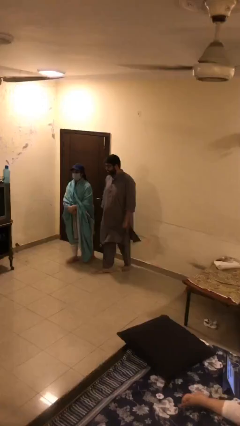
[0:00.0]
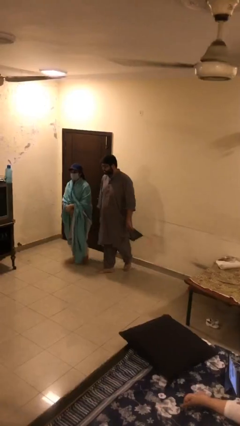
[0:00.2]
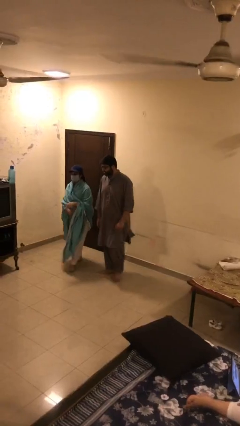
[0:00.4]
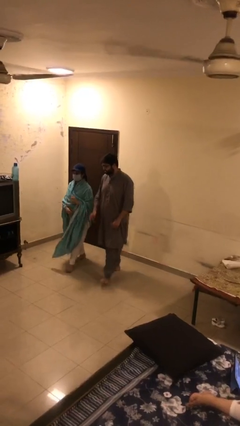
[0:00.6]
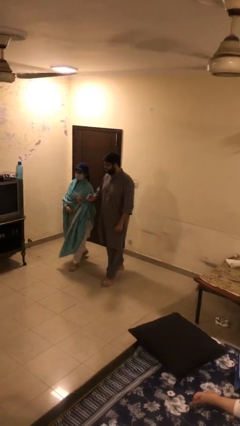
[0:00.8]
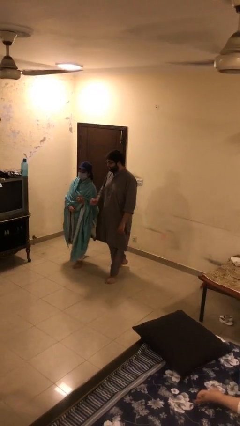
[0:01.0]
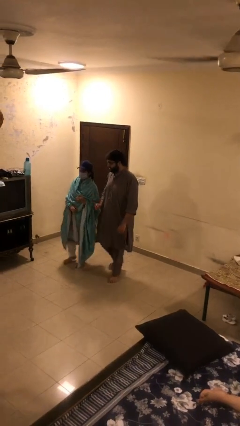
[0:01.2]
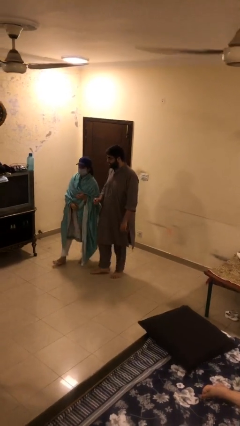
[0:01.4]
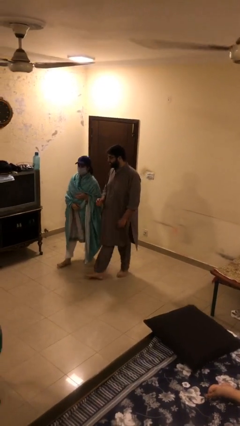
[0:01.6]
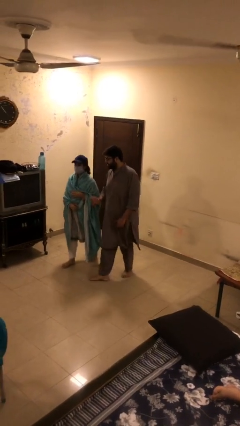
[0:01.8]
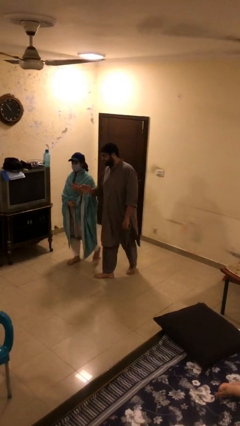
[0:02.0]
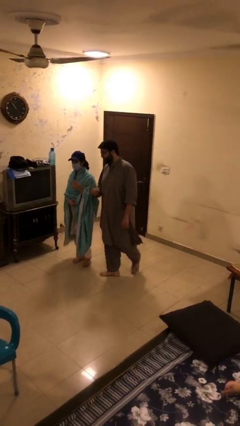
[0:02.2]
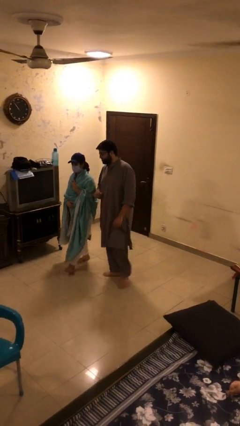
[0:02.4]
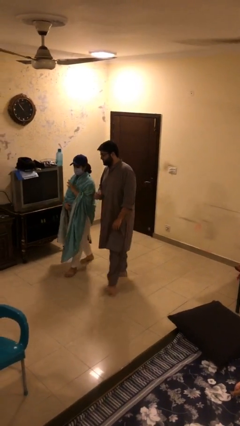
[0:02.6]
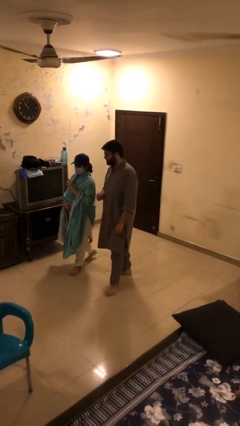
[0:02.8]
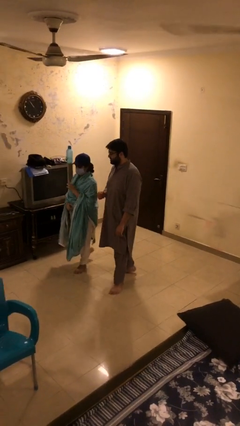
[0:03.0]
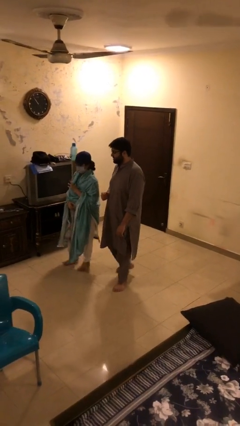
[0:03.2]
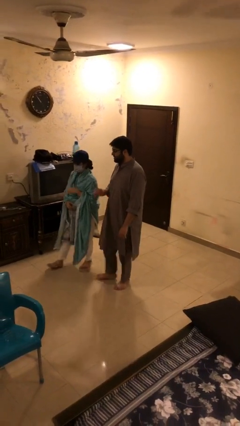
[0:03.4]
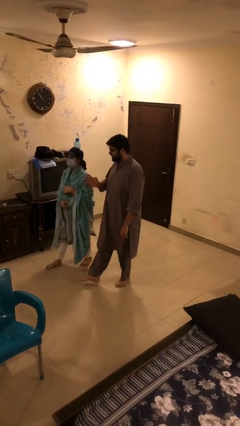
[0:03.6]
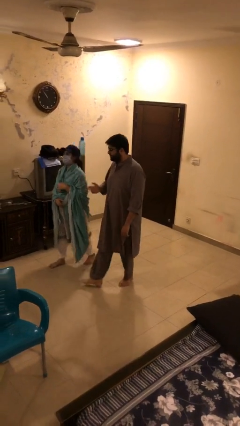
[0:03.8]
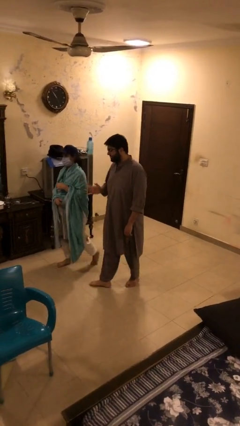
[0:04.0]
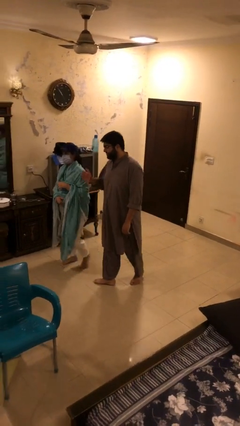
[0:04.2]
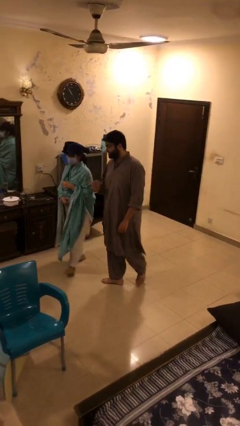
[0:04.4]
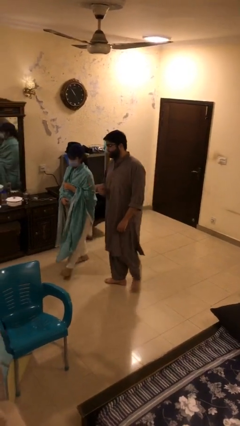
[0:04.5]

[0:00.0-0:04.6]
person talks to person

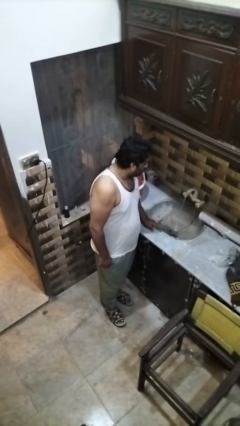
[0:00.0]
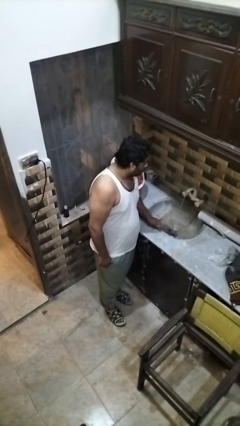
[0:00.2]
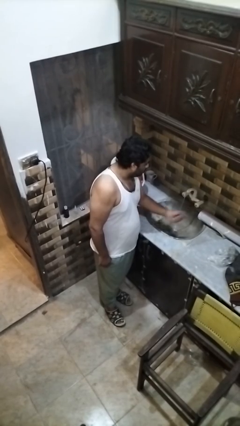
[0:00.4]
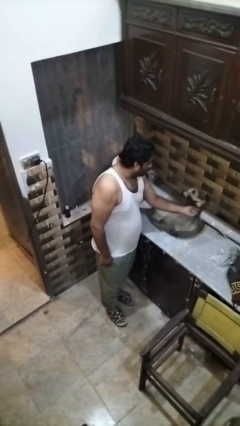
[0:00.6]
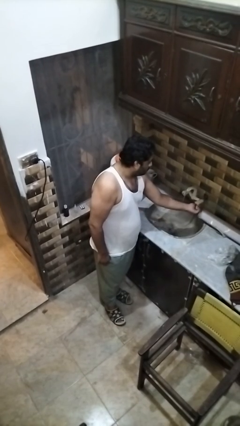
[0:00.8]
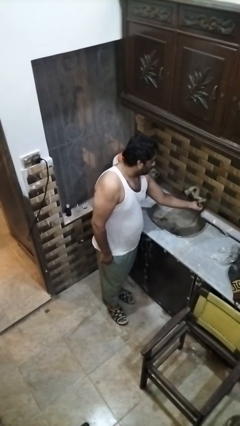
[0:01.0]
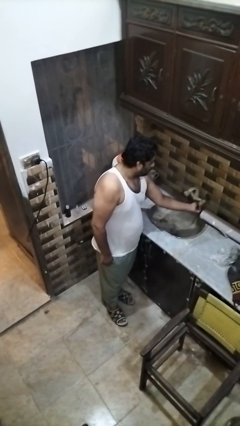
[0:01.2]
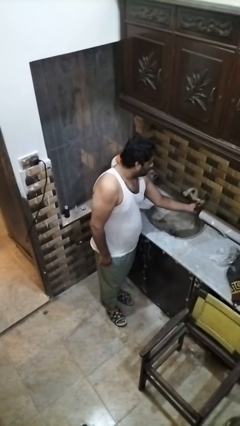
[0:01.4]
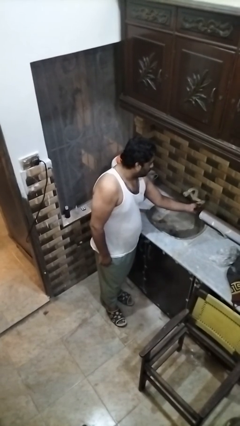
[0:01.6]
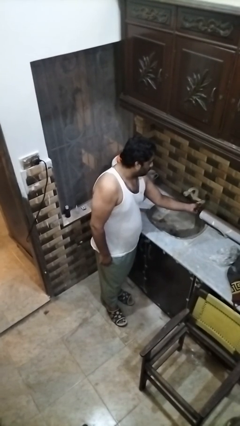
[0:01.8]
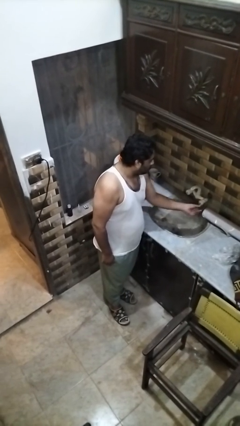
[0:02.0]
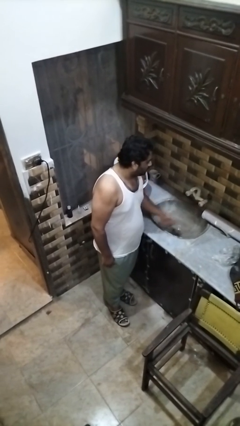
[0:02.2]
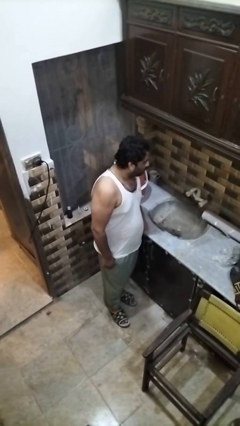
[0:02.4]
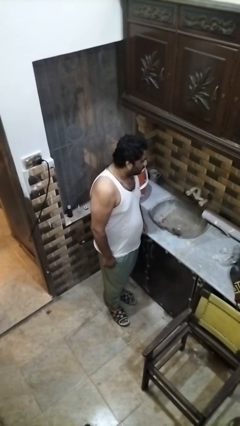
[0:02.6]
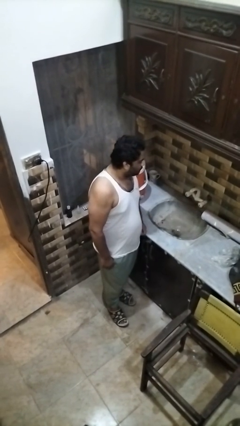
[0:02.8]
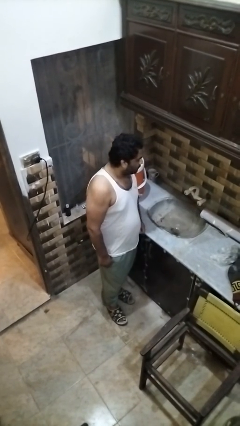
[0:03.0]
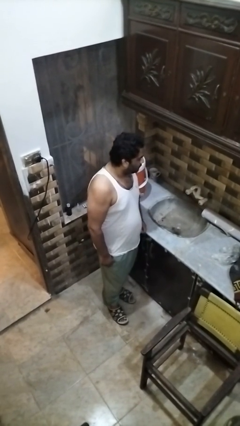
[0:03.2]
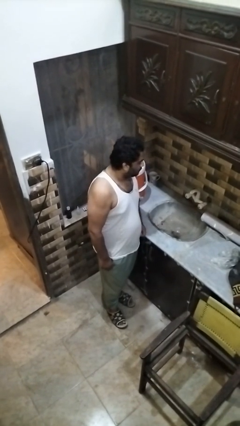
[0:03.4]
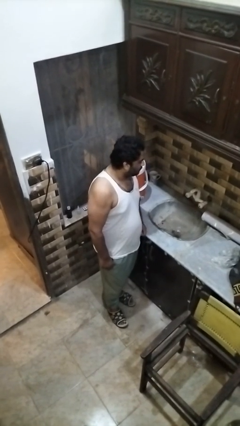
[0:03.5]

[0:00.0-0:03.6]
person turns off faucet

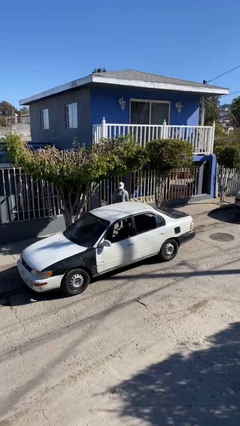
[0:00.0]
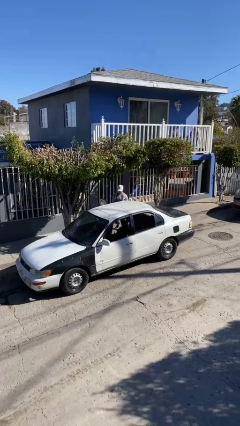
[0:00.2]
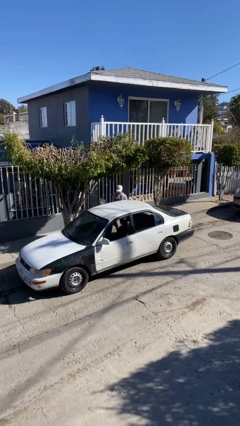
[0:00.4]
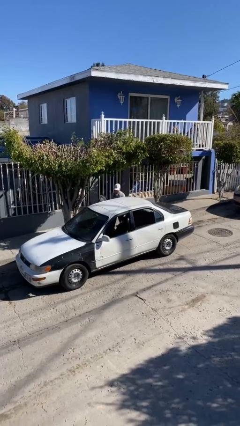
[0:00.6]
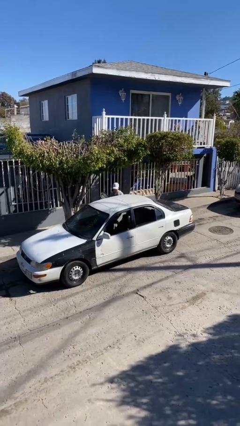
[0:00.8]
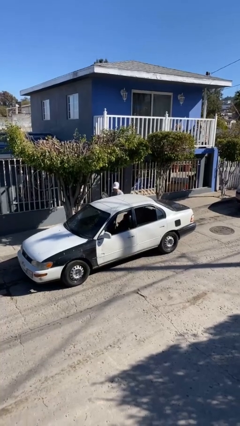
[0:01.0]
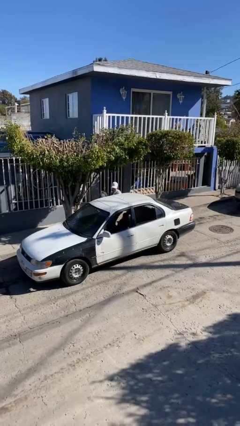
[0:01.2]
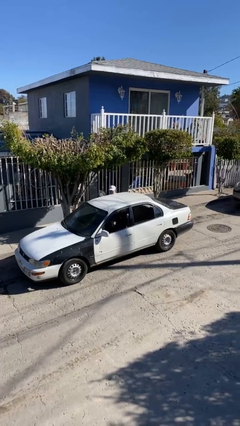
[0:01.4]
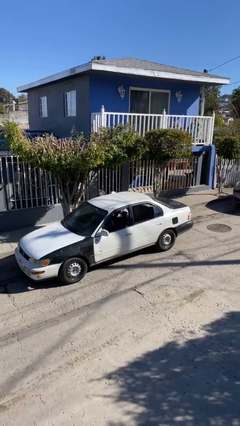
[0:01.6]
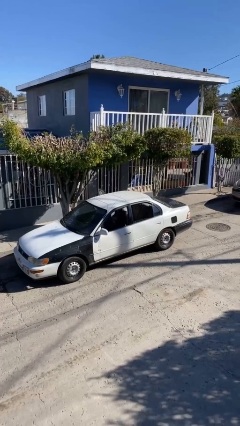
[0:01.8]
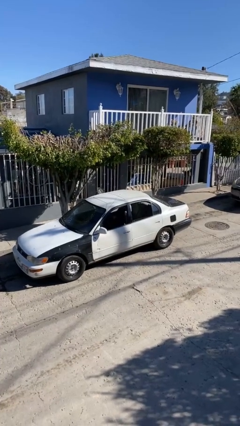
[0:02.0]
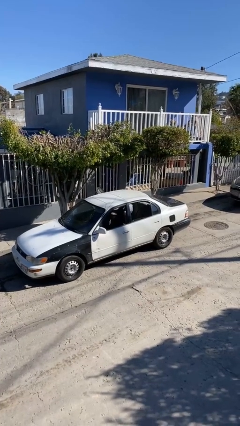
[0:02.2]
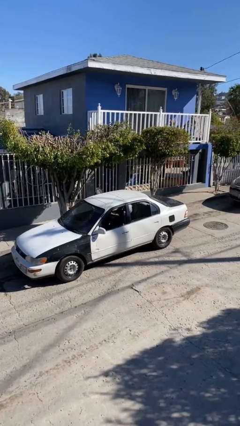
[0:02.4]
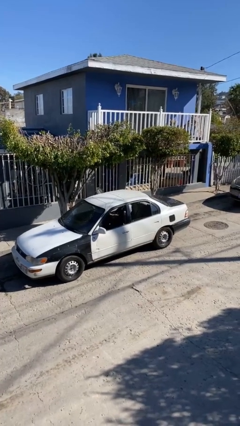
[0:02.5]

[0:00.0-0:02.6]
person enters car

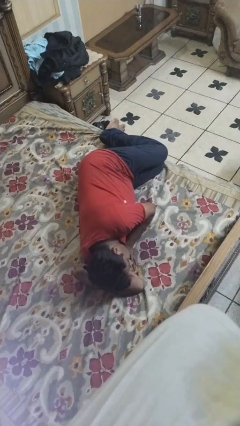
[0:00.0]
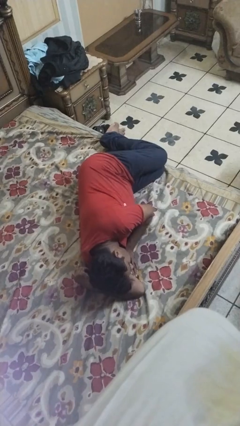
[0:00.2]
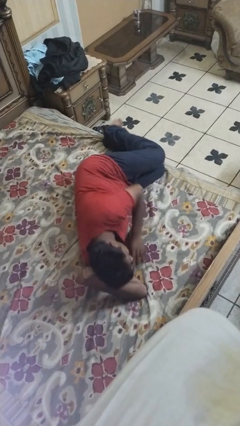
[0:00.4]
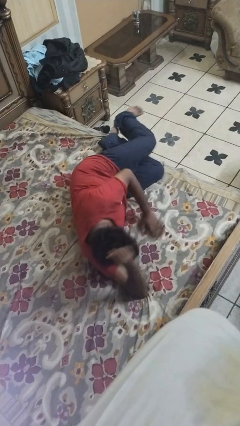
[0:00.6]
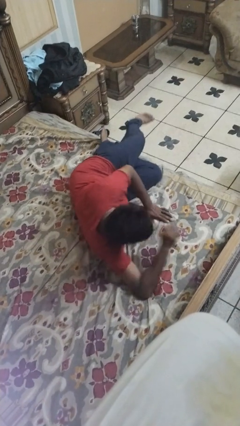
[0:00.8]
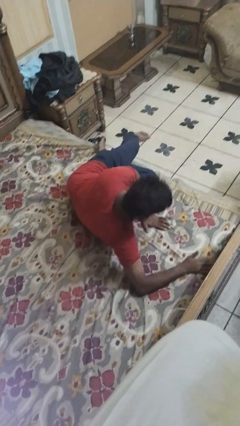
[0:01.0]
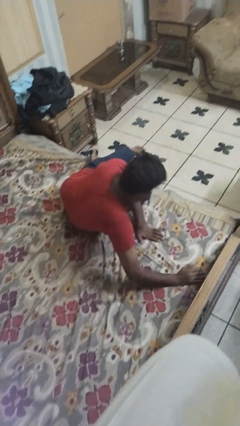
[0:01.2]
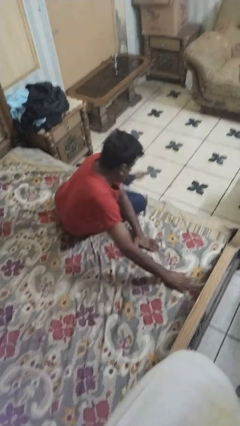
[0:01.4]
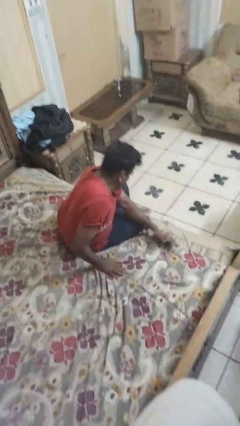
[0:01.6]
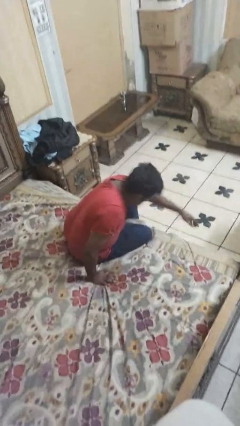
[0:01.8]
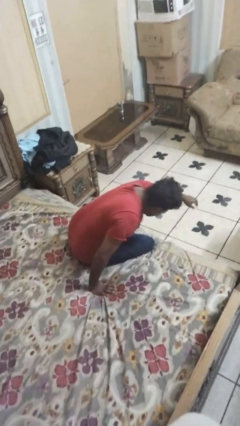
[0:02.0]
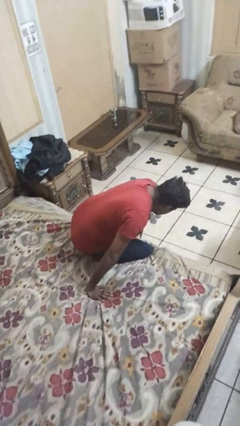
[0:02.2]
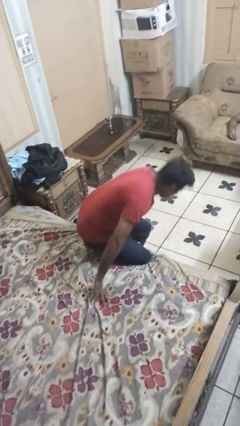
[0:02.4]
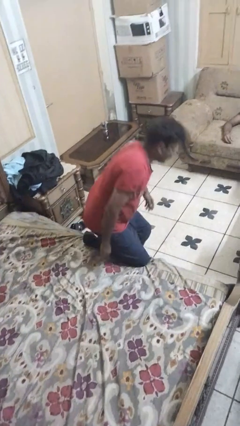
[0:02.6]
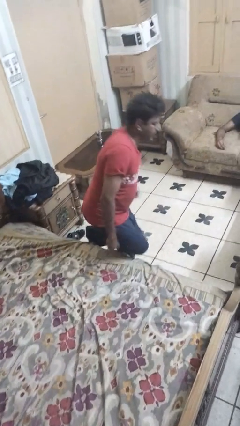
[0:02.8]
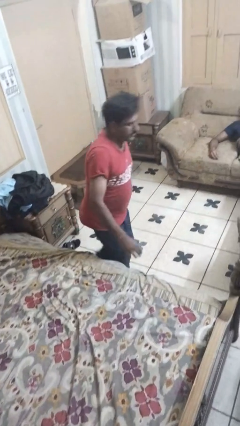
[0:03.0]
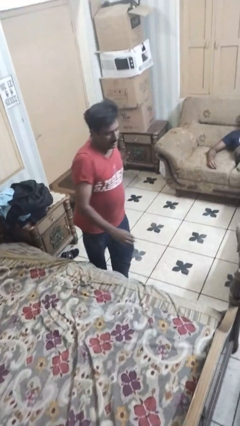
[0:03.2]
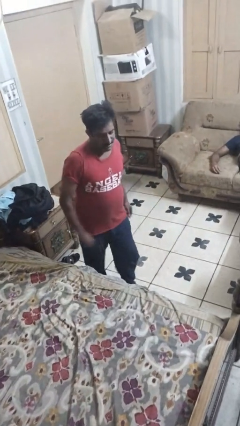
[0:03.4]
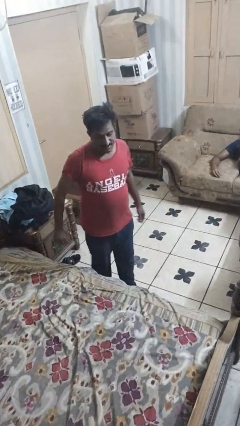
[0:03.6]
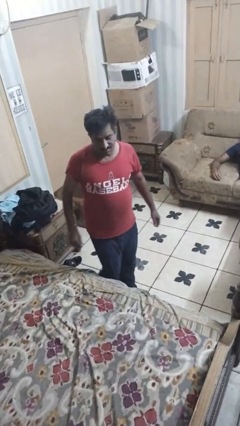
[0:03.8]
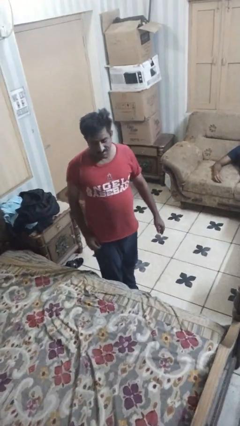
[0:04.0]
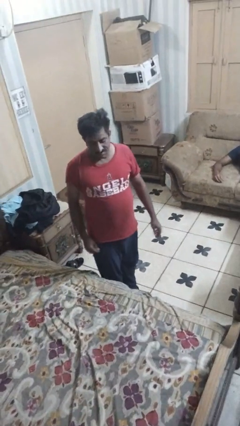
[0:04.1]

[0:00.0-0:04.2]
person stands up

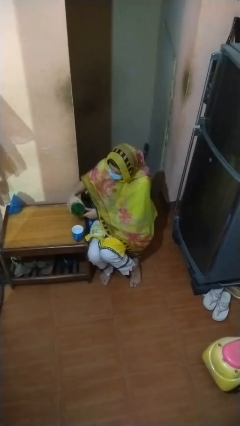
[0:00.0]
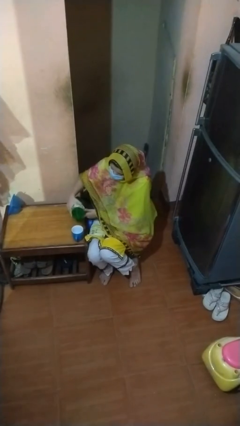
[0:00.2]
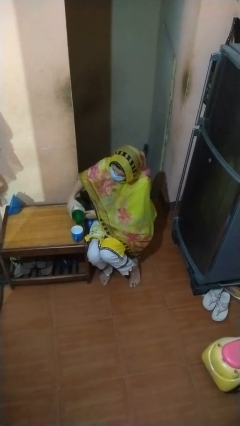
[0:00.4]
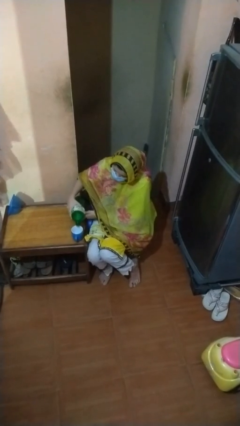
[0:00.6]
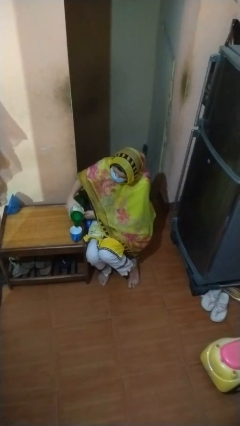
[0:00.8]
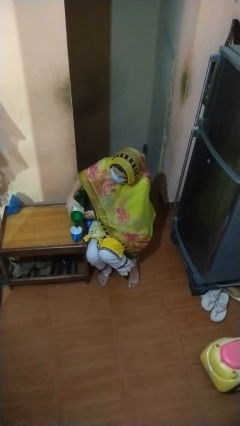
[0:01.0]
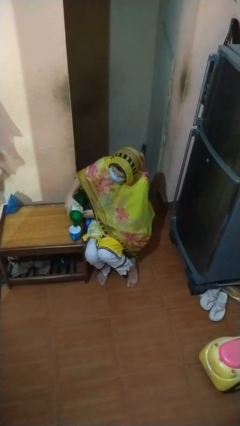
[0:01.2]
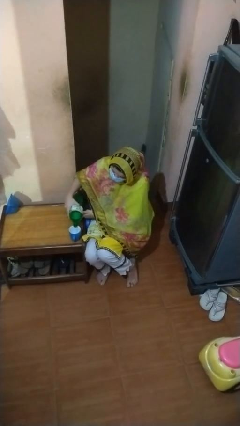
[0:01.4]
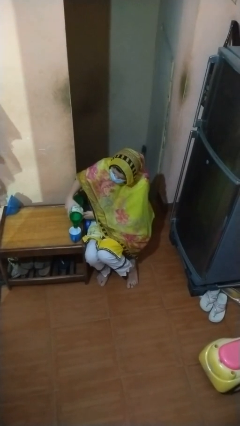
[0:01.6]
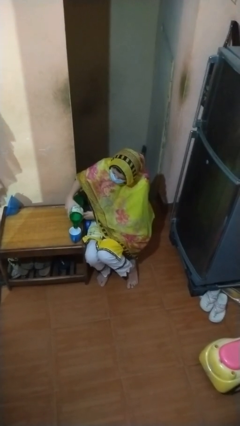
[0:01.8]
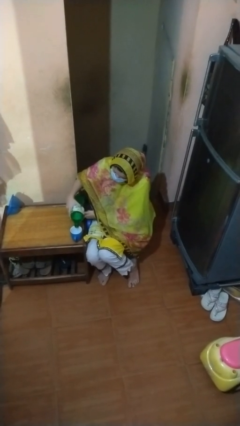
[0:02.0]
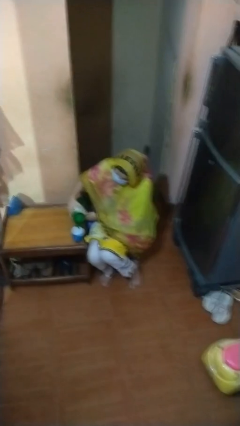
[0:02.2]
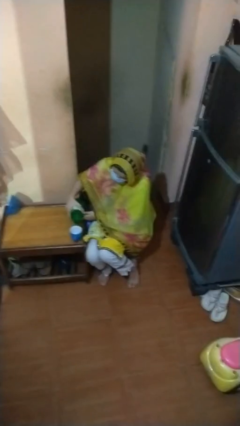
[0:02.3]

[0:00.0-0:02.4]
person pours liquid into cup

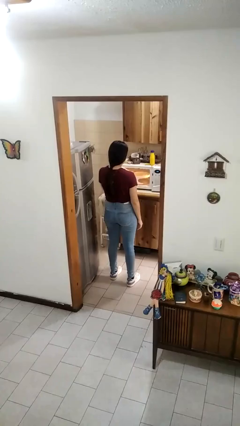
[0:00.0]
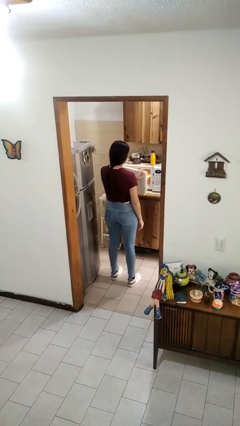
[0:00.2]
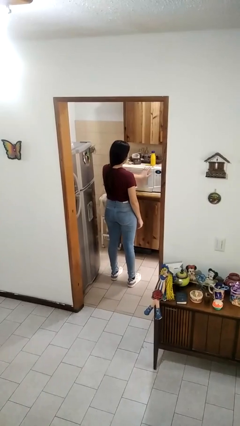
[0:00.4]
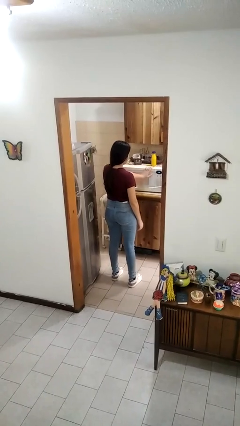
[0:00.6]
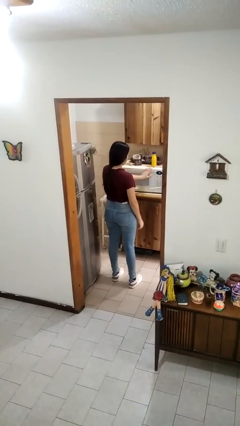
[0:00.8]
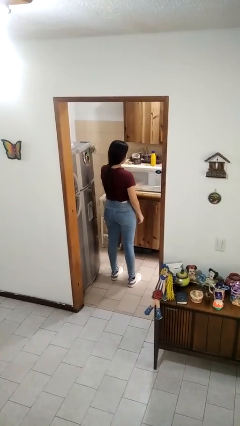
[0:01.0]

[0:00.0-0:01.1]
person closes microwave
